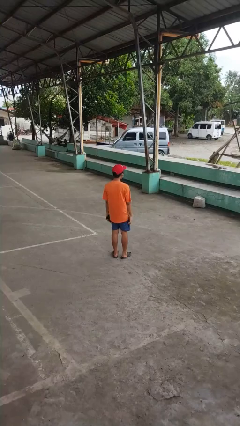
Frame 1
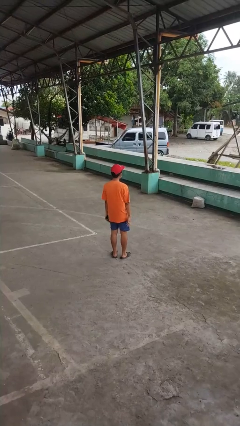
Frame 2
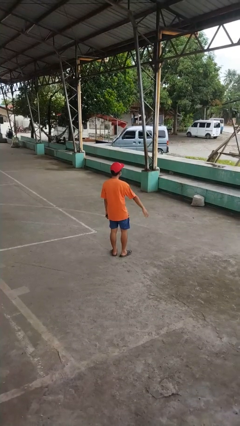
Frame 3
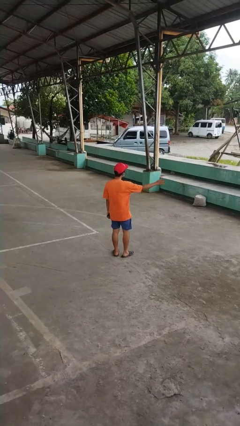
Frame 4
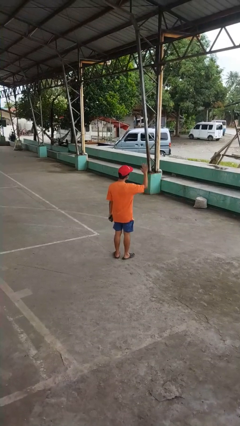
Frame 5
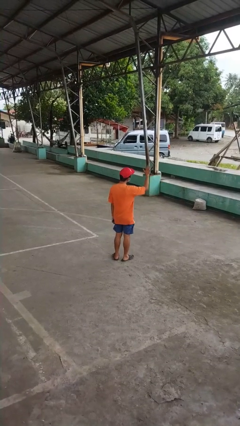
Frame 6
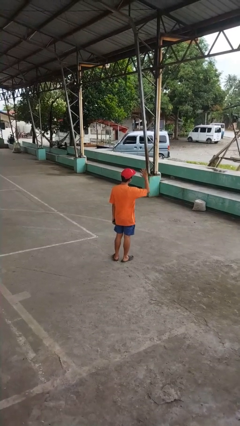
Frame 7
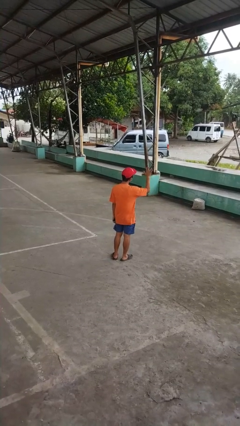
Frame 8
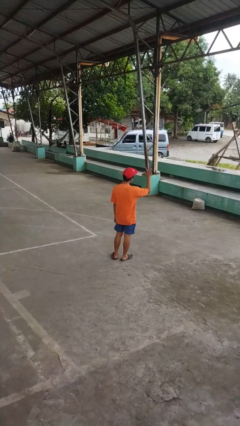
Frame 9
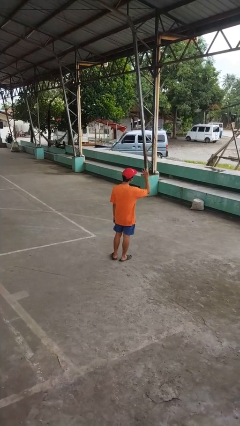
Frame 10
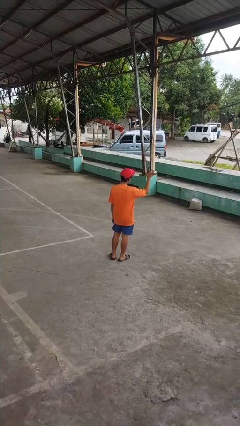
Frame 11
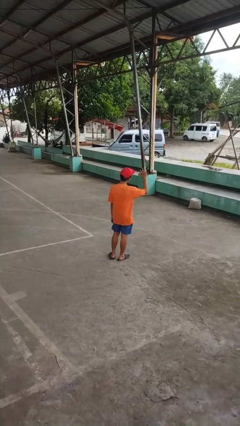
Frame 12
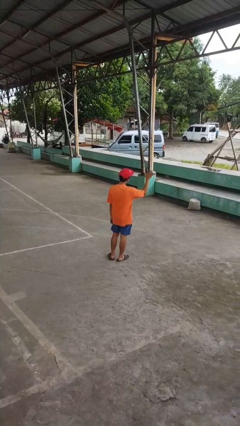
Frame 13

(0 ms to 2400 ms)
person waves at person

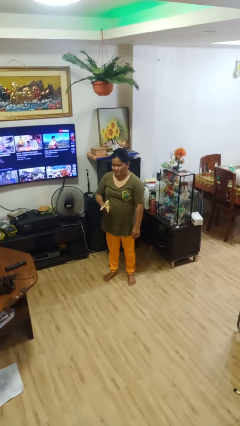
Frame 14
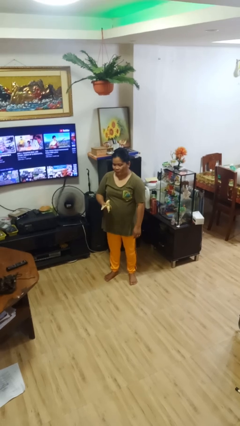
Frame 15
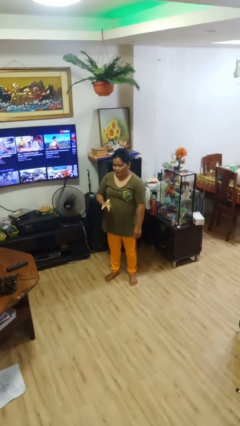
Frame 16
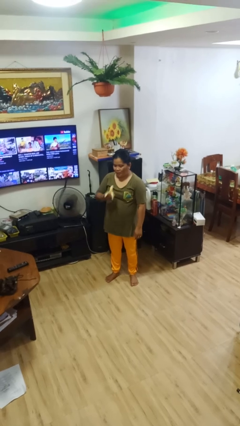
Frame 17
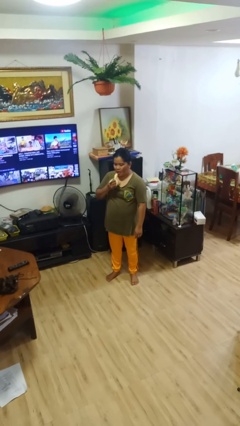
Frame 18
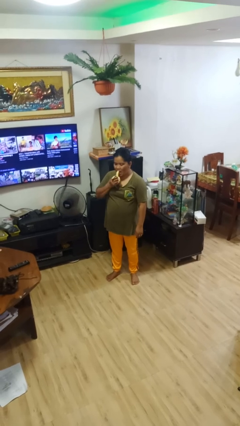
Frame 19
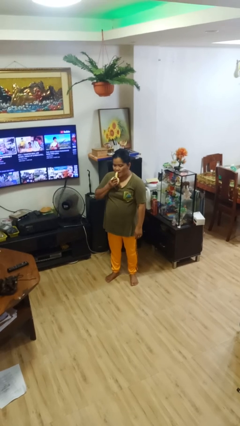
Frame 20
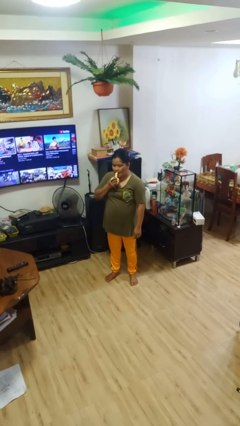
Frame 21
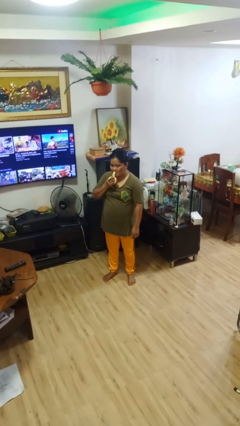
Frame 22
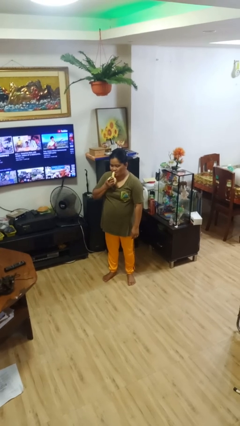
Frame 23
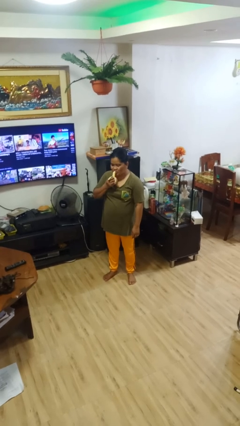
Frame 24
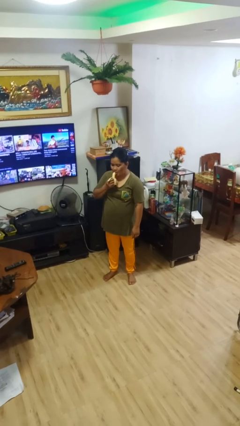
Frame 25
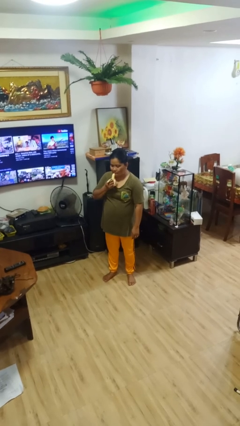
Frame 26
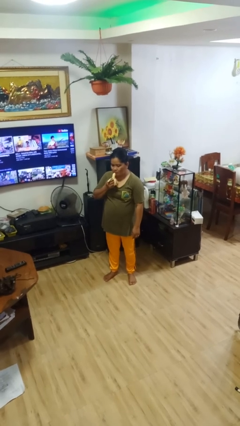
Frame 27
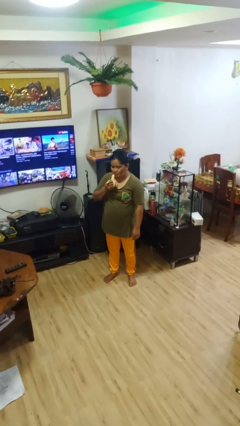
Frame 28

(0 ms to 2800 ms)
person eats banana

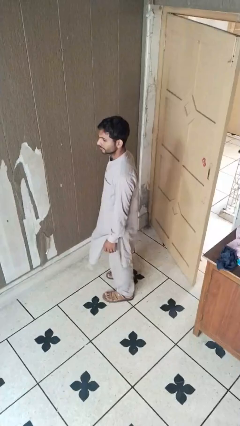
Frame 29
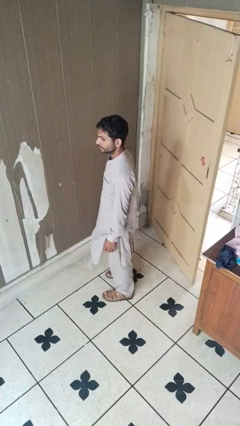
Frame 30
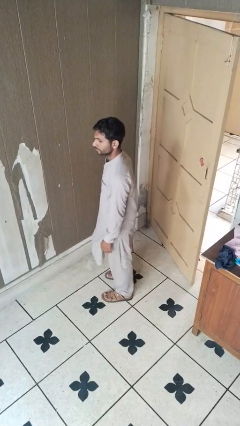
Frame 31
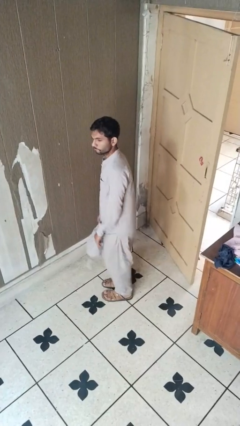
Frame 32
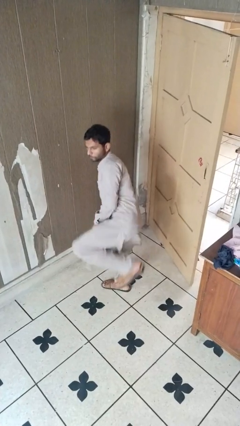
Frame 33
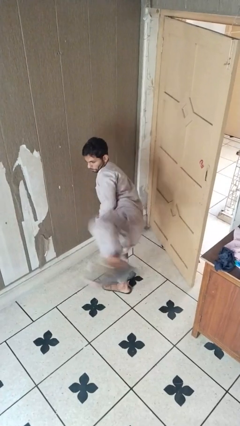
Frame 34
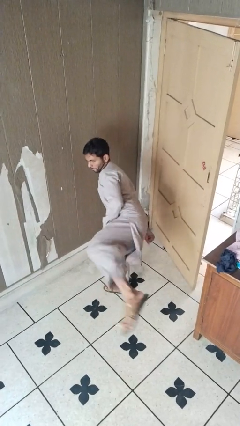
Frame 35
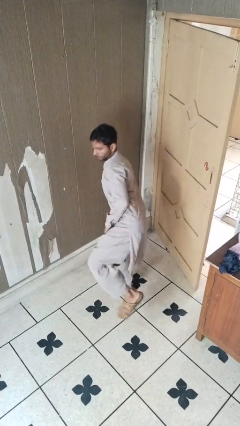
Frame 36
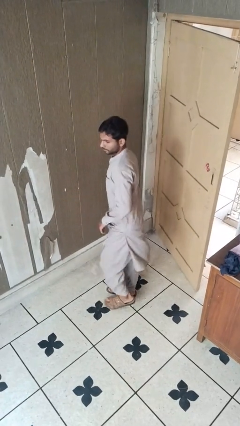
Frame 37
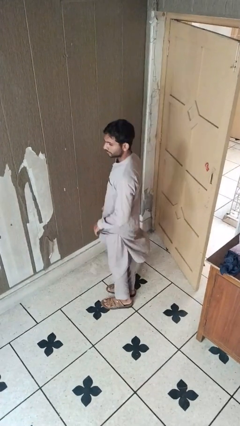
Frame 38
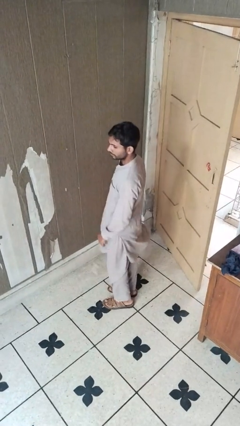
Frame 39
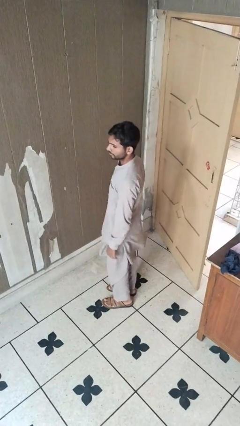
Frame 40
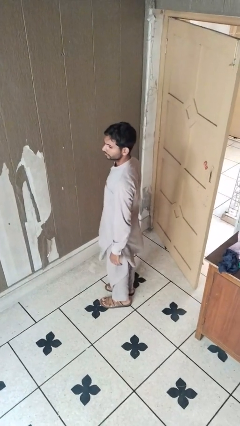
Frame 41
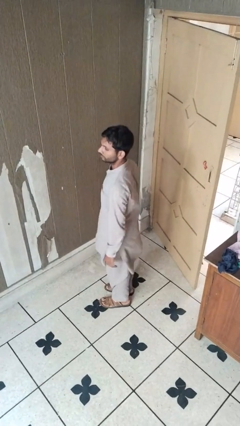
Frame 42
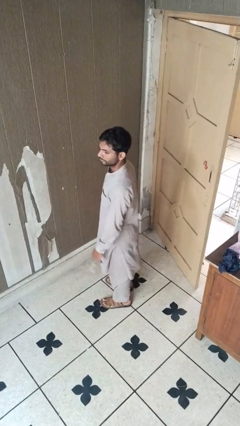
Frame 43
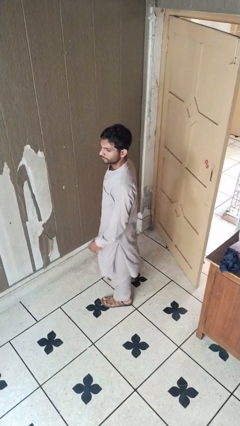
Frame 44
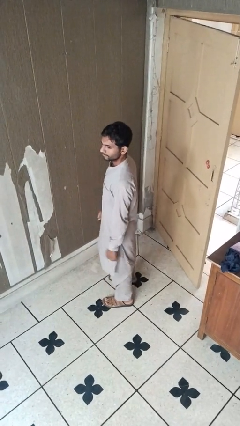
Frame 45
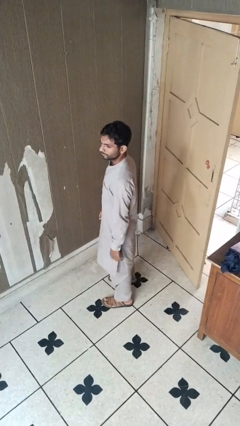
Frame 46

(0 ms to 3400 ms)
person karate kicks

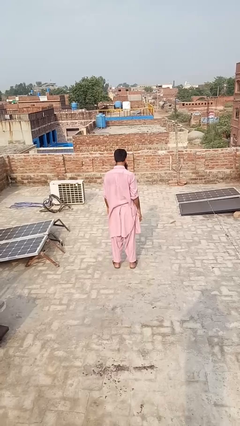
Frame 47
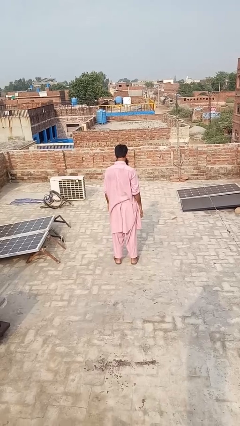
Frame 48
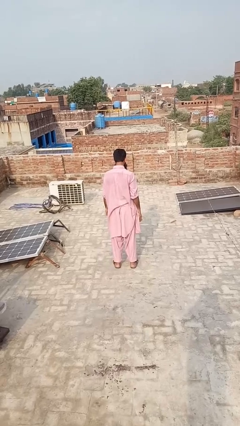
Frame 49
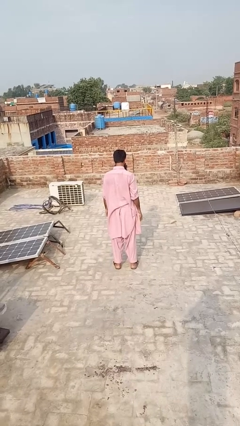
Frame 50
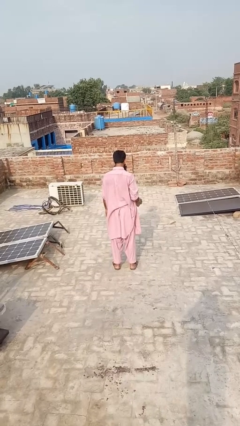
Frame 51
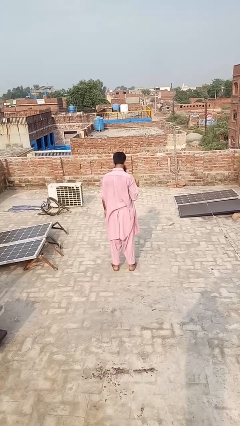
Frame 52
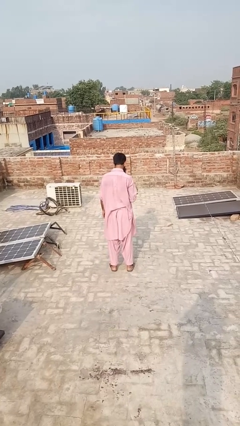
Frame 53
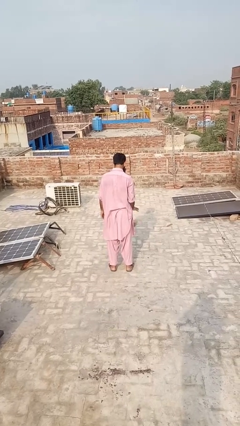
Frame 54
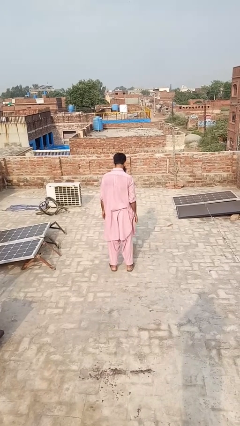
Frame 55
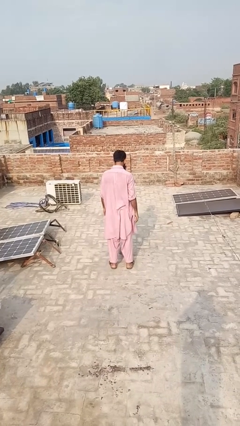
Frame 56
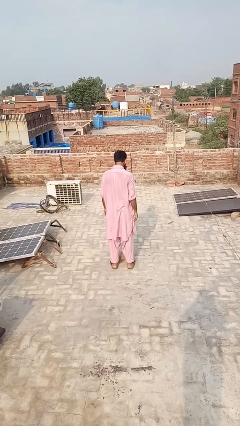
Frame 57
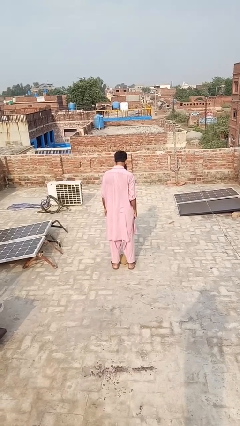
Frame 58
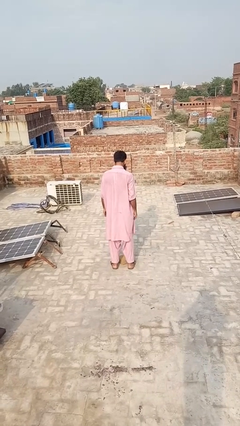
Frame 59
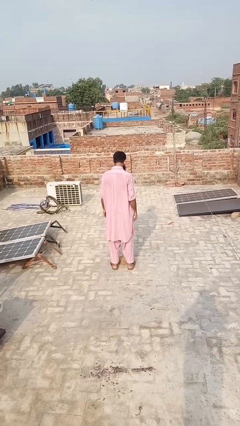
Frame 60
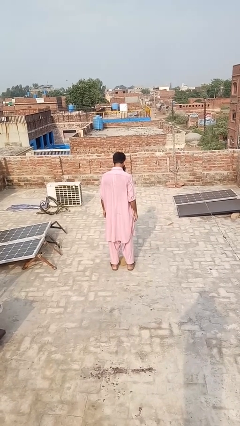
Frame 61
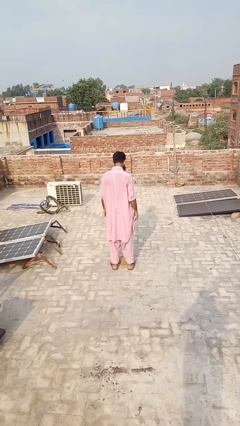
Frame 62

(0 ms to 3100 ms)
person throws object to ground

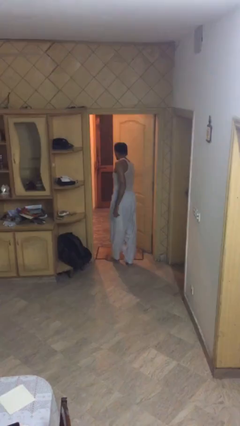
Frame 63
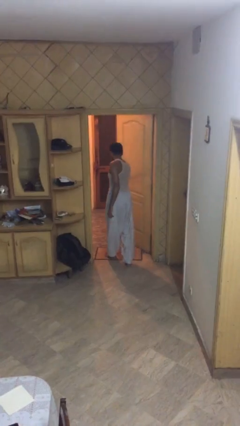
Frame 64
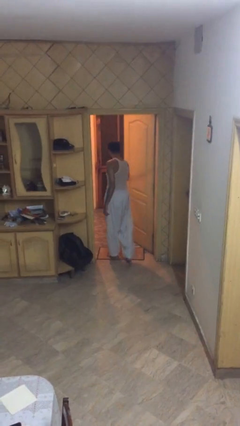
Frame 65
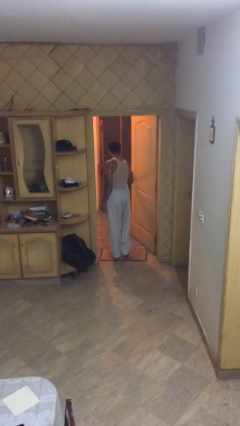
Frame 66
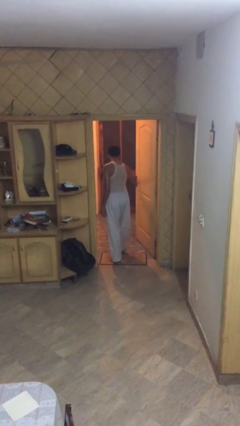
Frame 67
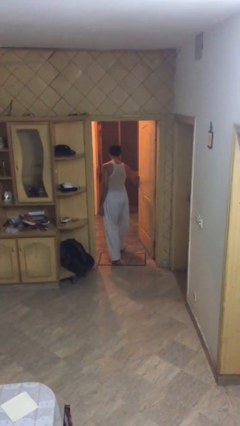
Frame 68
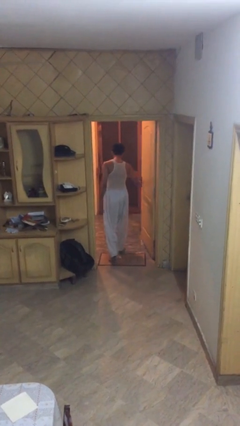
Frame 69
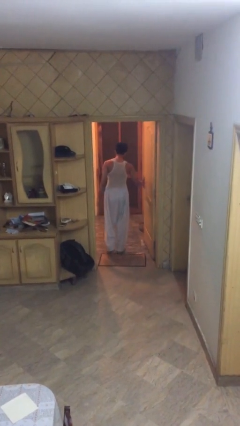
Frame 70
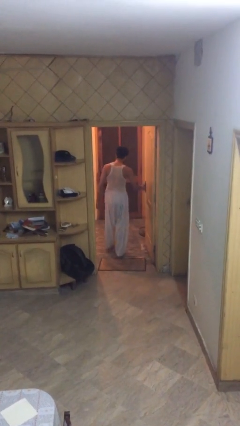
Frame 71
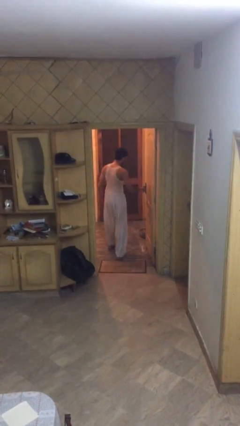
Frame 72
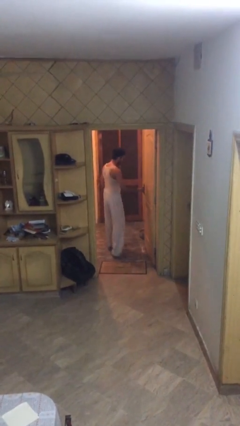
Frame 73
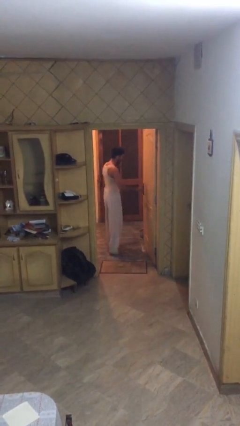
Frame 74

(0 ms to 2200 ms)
person exits scene through structure

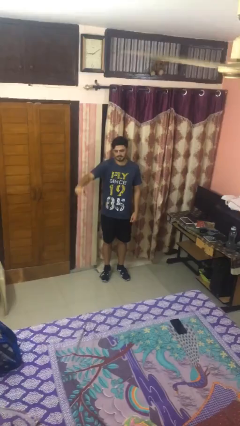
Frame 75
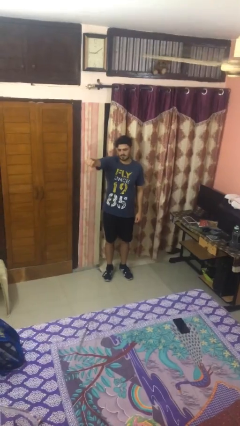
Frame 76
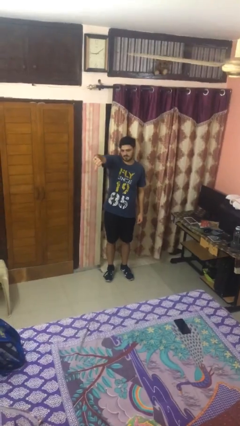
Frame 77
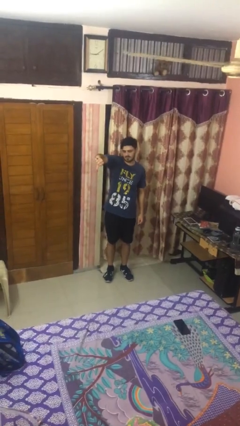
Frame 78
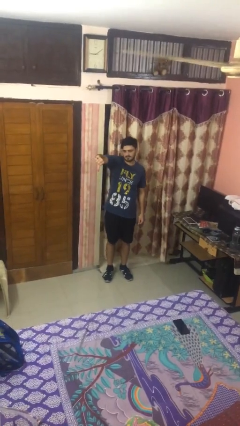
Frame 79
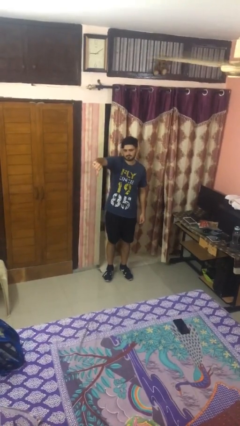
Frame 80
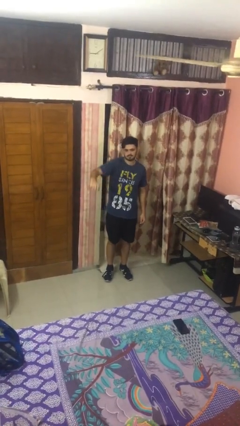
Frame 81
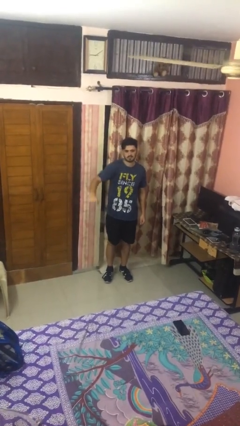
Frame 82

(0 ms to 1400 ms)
person gestures thumbs down

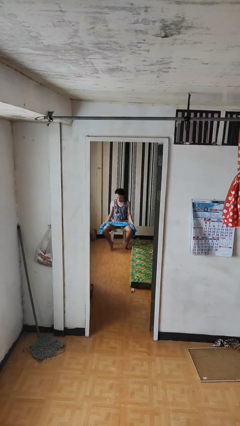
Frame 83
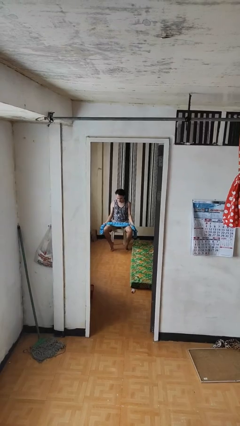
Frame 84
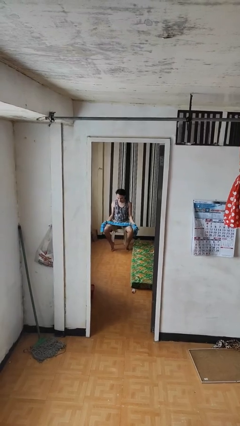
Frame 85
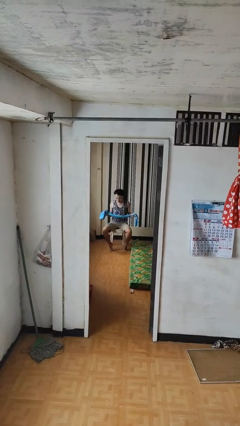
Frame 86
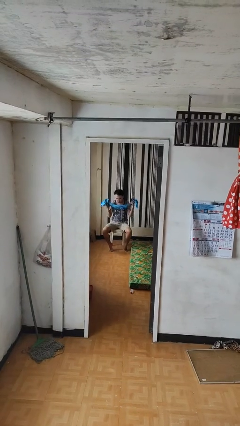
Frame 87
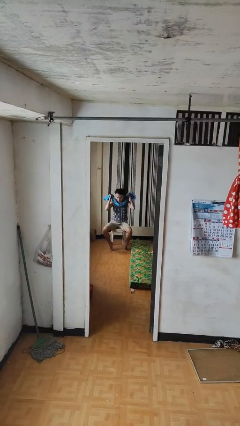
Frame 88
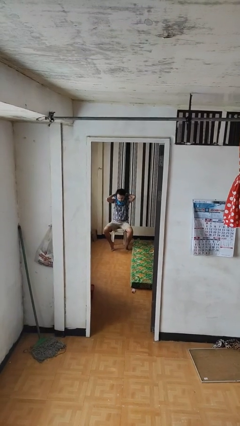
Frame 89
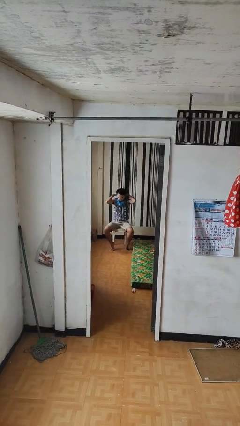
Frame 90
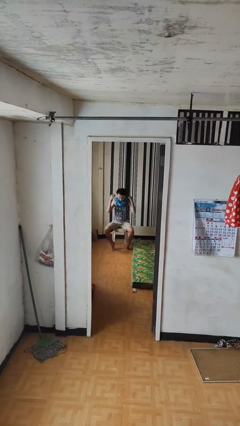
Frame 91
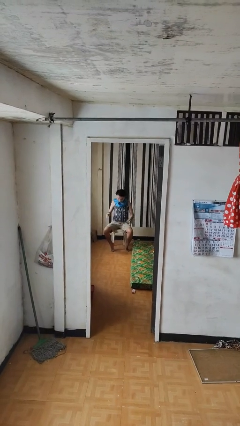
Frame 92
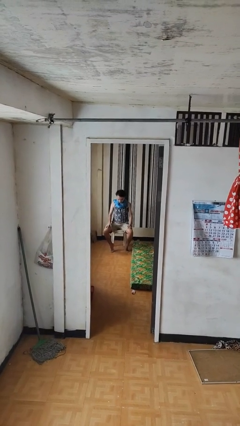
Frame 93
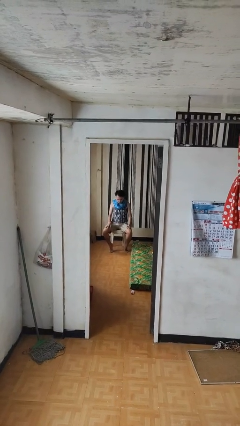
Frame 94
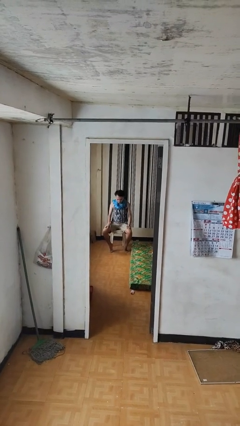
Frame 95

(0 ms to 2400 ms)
person puts on scarf
